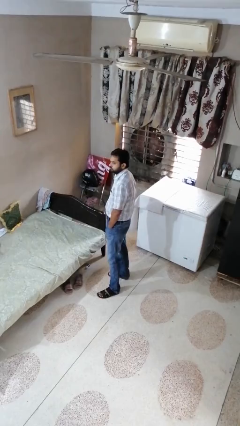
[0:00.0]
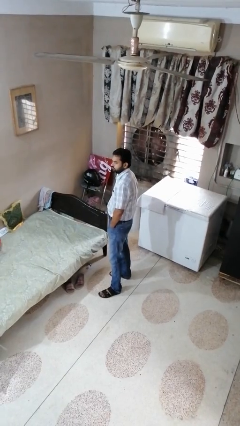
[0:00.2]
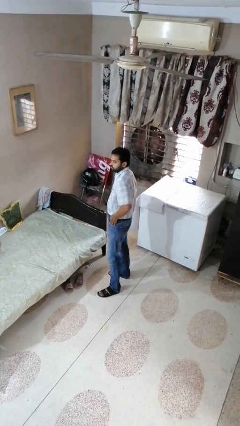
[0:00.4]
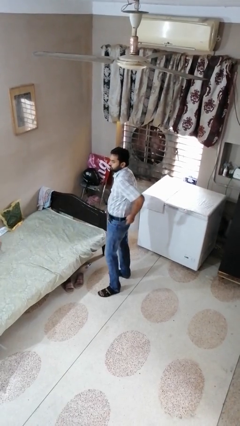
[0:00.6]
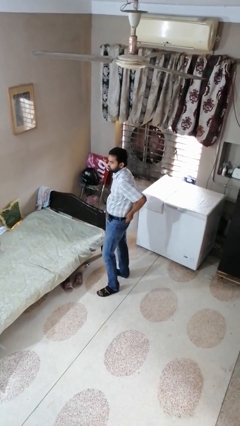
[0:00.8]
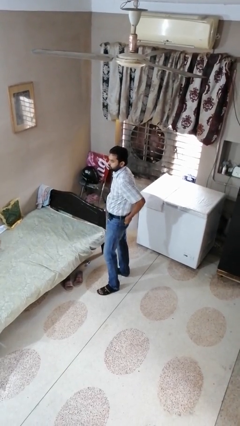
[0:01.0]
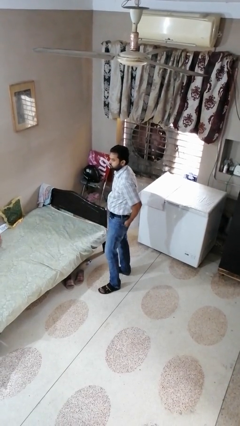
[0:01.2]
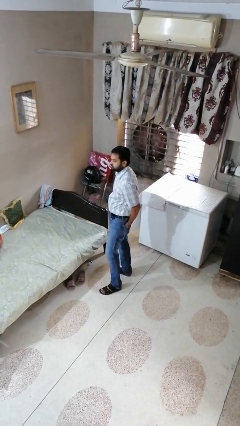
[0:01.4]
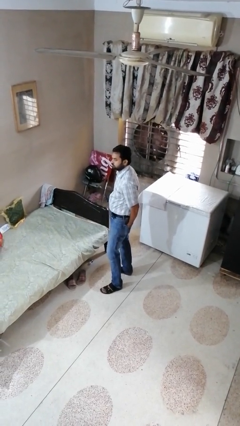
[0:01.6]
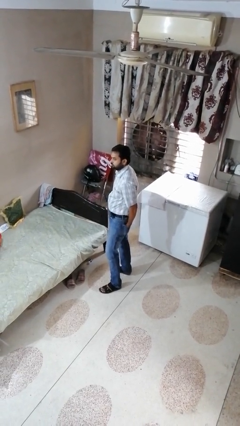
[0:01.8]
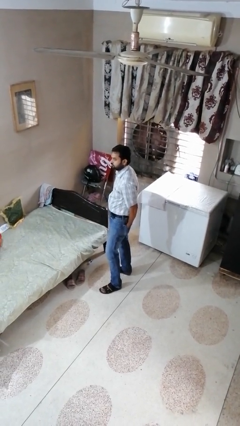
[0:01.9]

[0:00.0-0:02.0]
person puts hands in back pockets

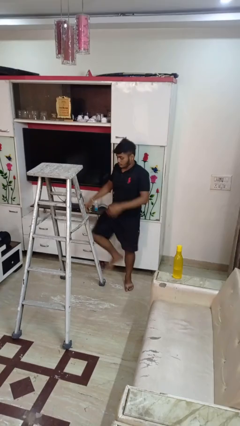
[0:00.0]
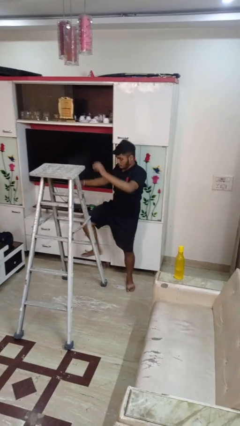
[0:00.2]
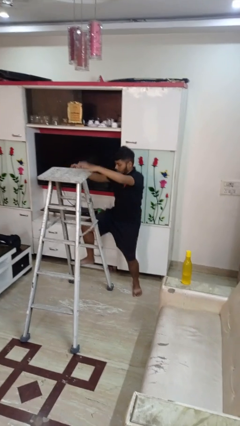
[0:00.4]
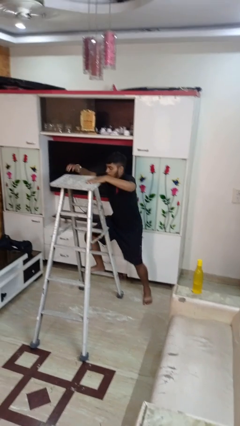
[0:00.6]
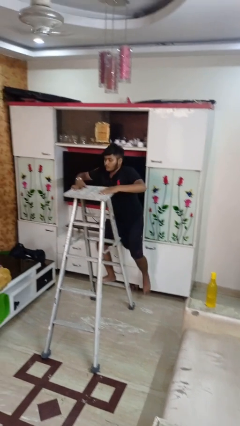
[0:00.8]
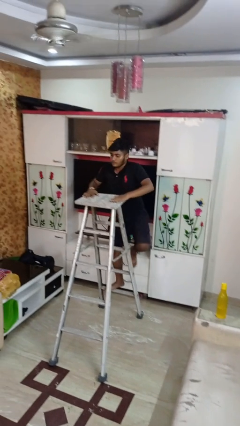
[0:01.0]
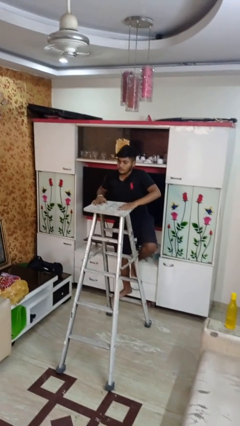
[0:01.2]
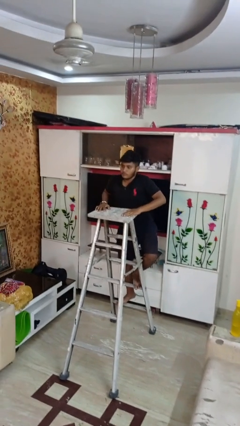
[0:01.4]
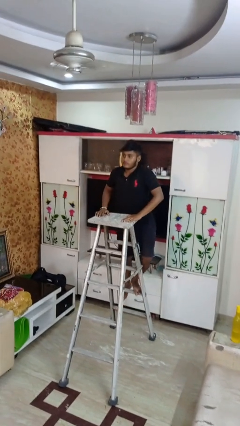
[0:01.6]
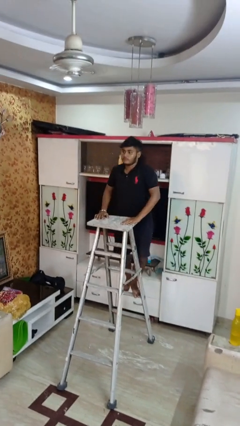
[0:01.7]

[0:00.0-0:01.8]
person climbs up ladder

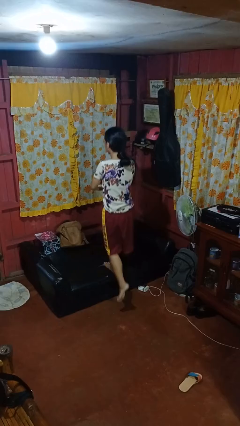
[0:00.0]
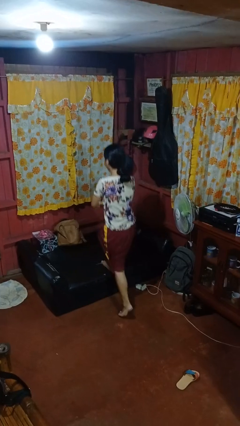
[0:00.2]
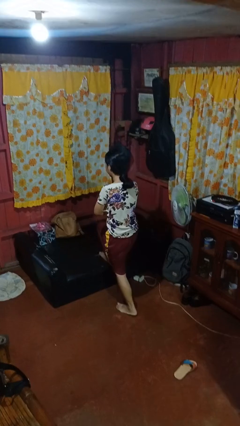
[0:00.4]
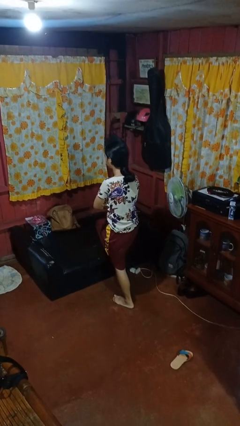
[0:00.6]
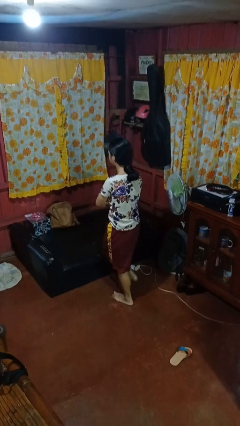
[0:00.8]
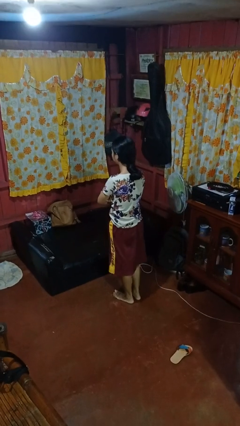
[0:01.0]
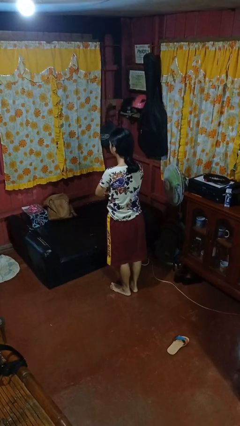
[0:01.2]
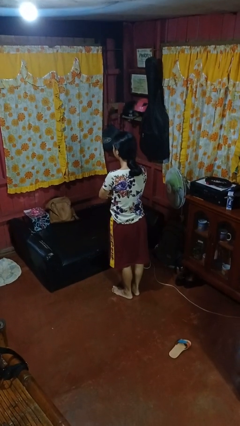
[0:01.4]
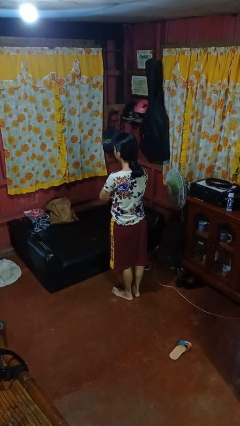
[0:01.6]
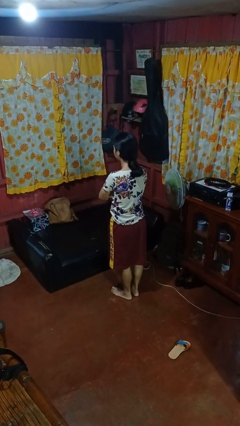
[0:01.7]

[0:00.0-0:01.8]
person climbs off couch

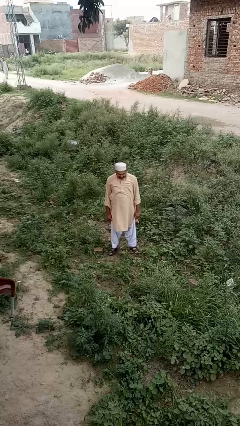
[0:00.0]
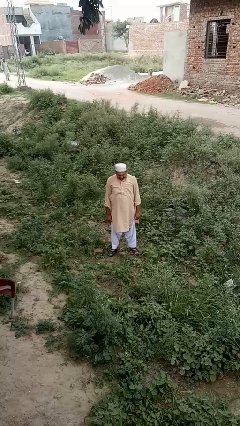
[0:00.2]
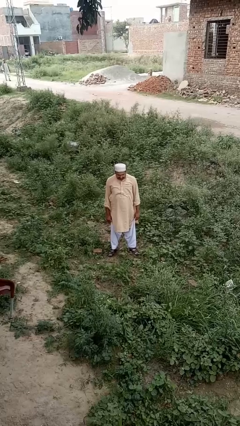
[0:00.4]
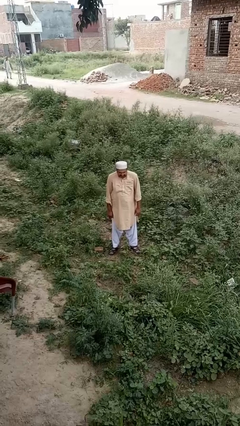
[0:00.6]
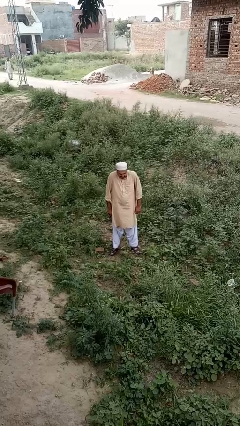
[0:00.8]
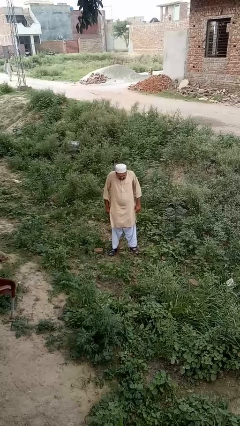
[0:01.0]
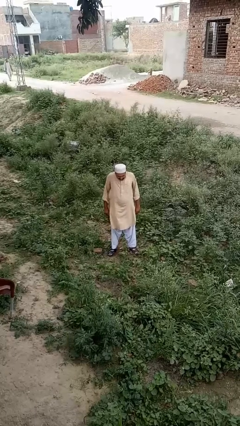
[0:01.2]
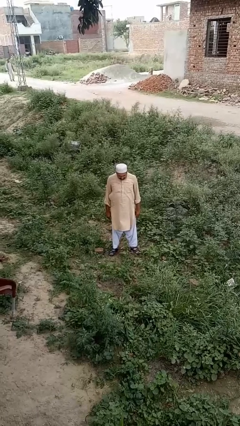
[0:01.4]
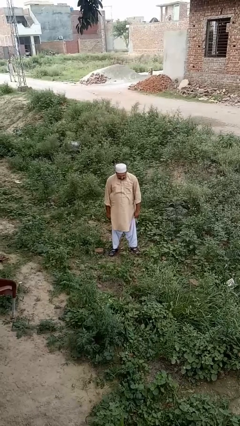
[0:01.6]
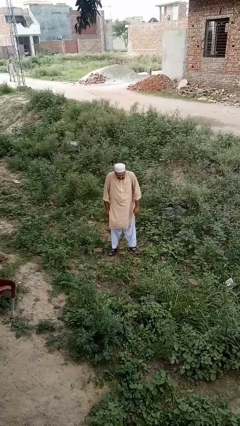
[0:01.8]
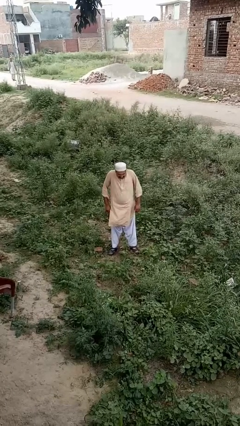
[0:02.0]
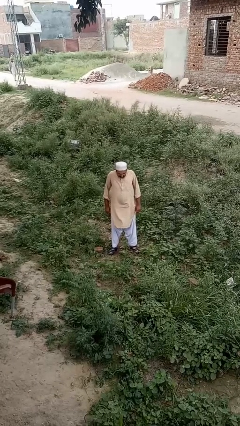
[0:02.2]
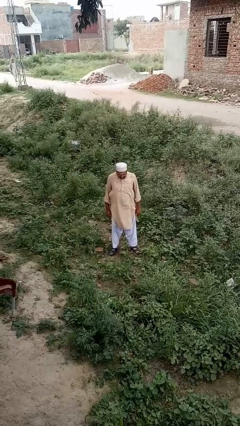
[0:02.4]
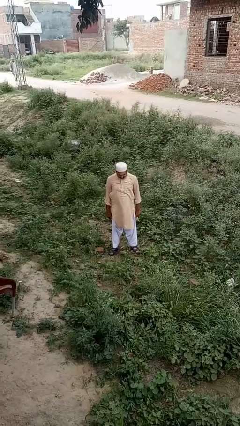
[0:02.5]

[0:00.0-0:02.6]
person shrugs

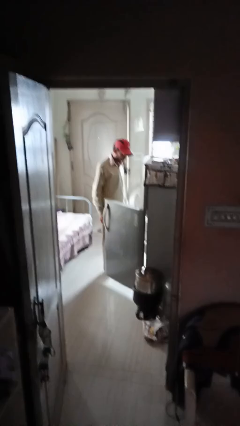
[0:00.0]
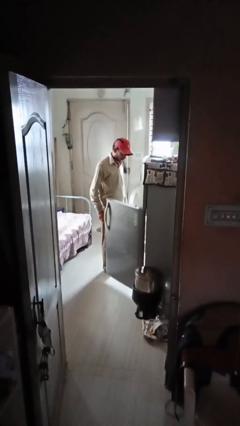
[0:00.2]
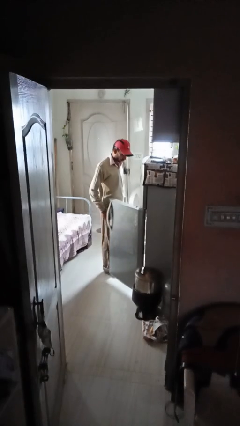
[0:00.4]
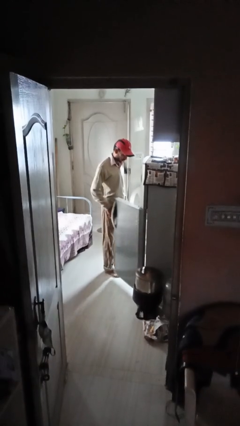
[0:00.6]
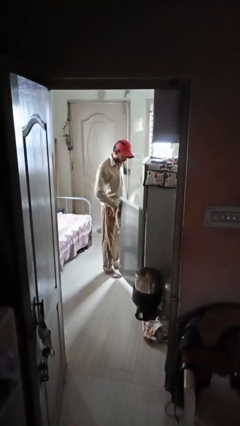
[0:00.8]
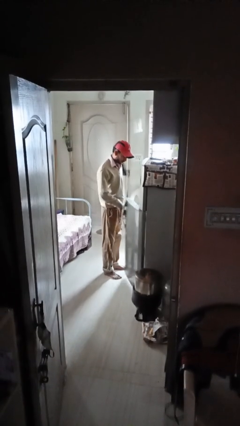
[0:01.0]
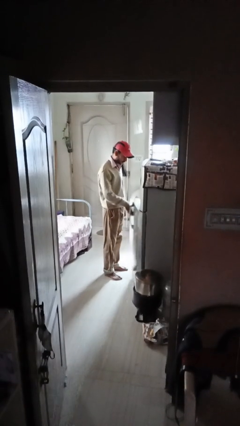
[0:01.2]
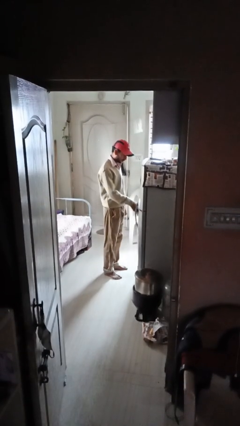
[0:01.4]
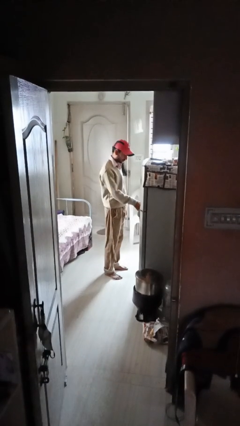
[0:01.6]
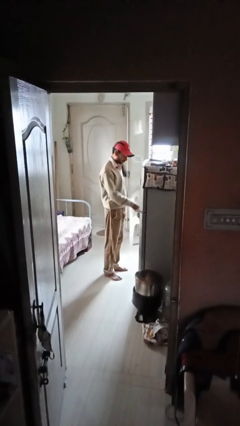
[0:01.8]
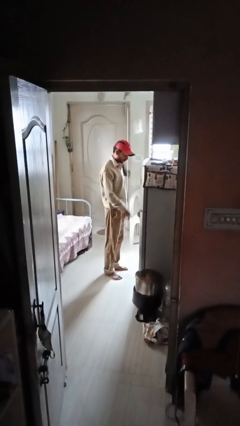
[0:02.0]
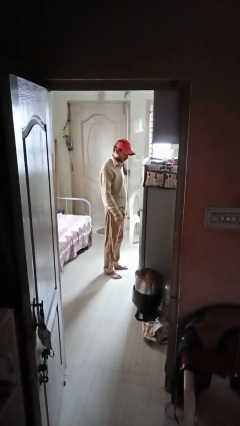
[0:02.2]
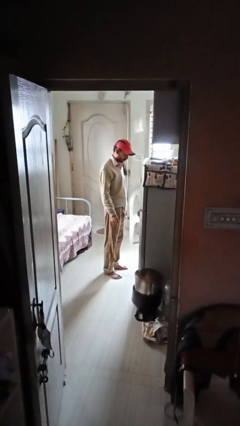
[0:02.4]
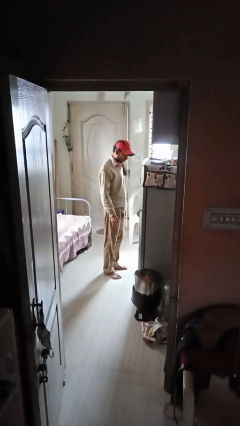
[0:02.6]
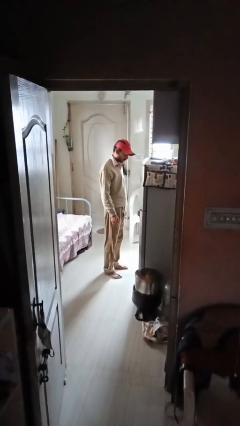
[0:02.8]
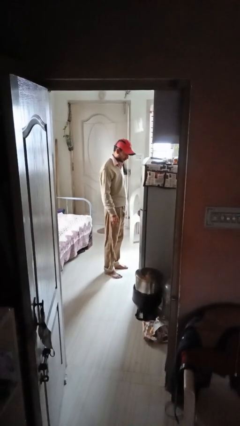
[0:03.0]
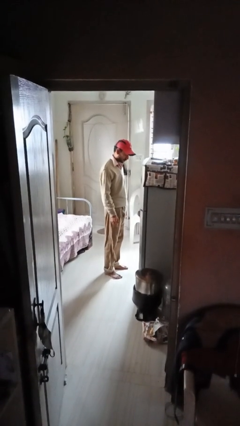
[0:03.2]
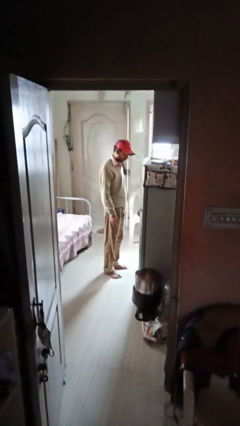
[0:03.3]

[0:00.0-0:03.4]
person closes refrigerator

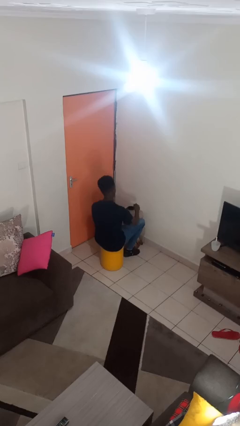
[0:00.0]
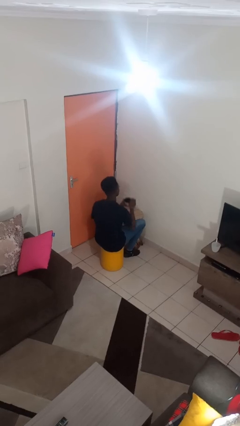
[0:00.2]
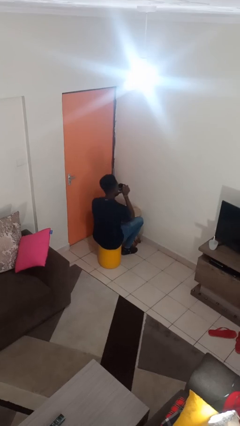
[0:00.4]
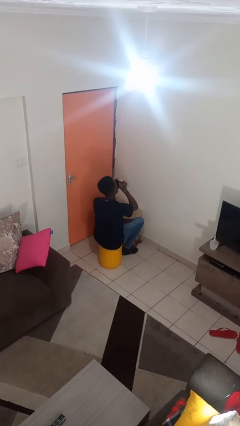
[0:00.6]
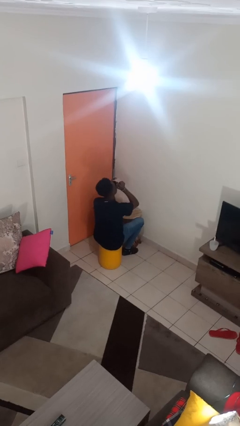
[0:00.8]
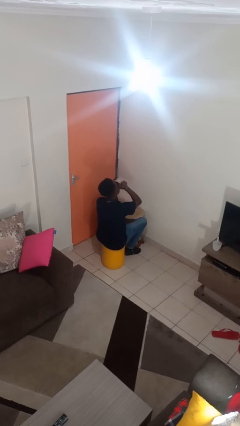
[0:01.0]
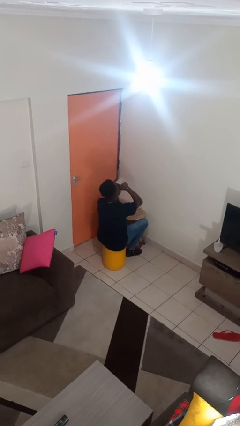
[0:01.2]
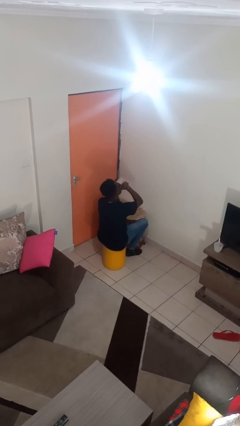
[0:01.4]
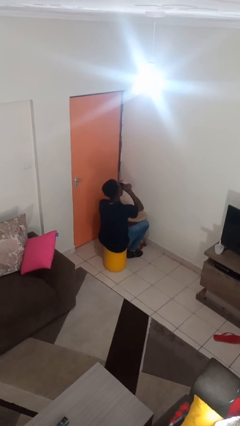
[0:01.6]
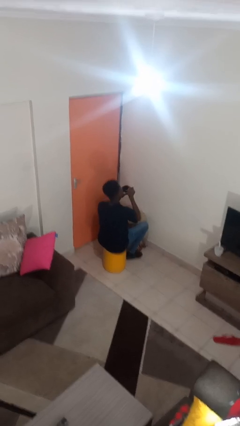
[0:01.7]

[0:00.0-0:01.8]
person drinks from mug

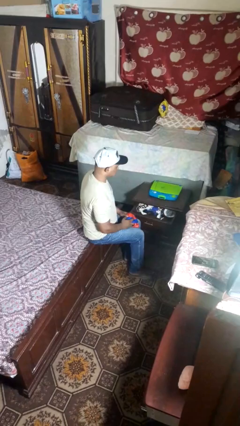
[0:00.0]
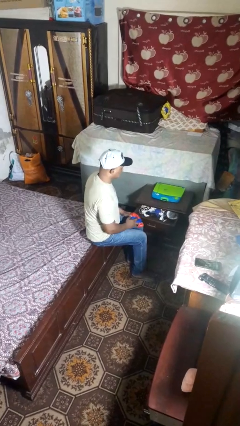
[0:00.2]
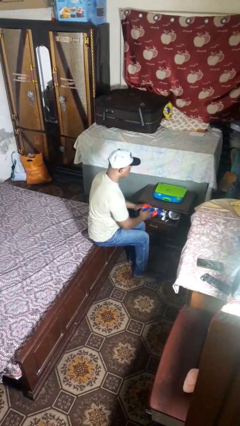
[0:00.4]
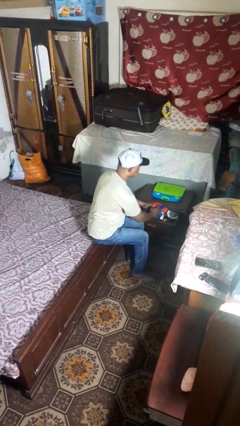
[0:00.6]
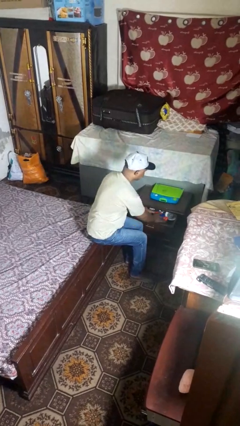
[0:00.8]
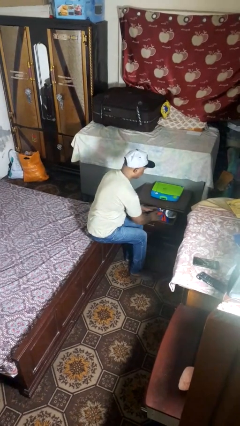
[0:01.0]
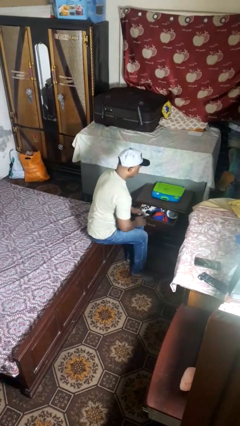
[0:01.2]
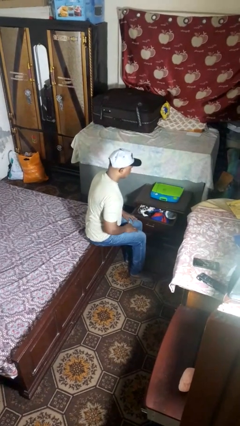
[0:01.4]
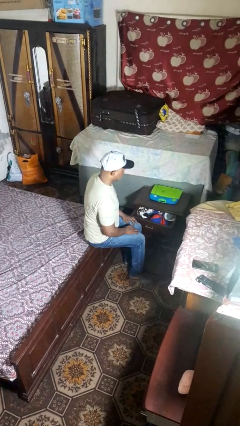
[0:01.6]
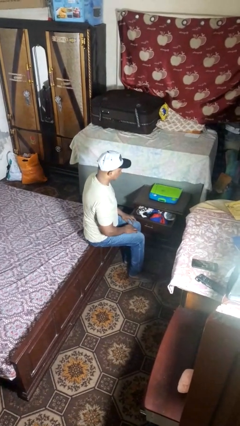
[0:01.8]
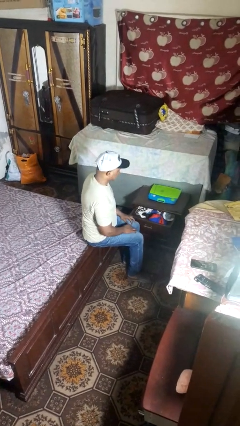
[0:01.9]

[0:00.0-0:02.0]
person puts clothes into dresser

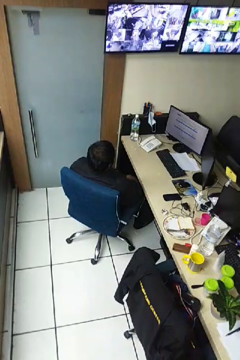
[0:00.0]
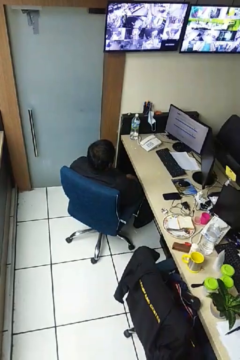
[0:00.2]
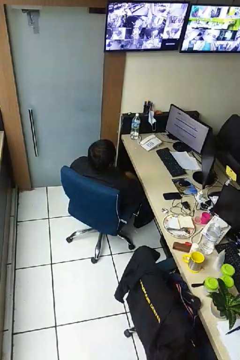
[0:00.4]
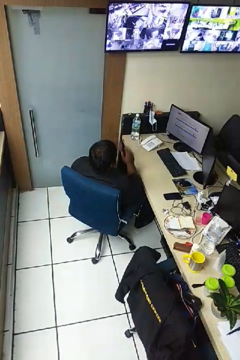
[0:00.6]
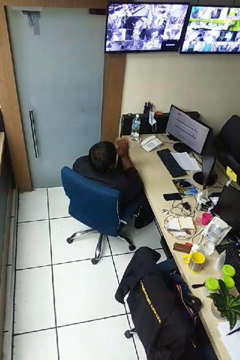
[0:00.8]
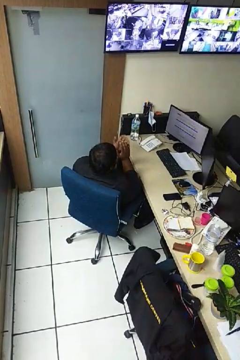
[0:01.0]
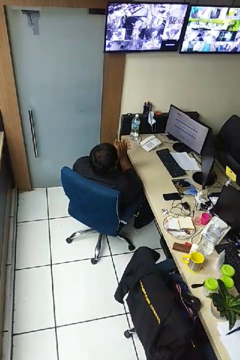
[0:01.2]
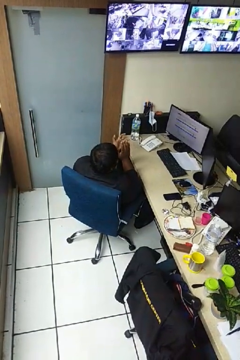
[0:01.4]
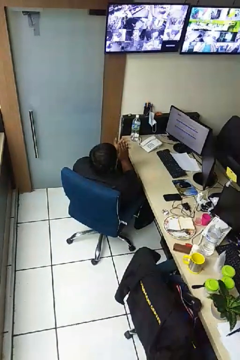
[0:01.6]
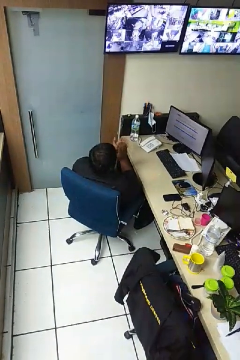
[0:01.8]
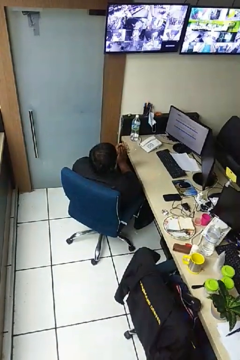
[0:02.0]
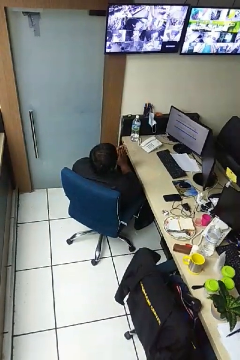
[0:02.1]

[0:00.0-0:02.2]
person claps hands
